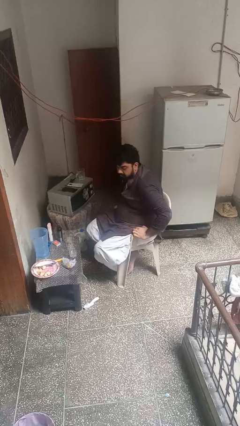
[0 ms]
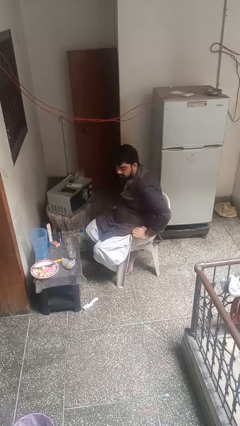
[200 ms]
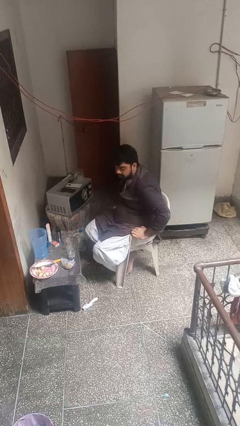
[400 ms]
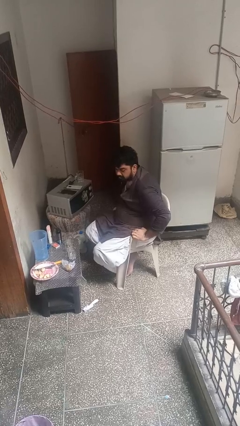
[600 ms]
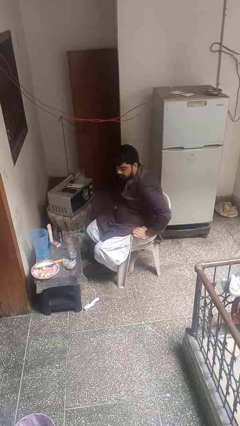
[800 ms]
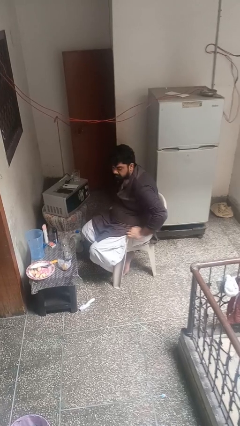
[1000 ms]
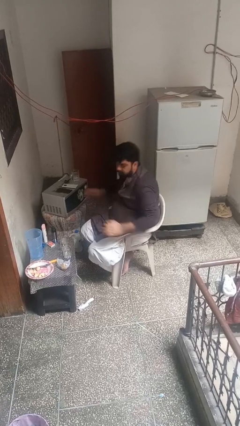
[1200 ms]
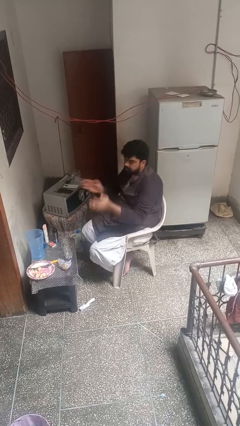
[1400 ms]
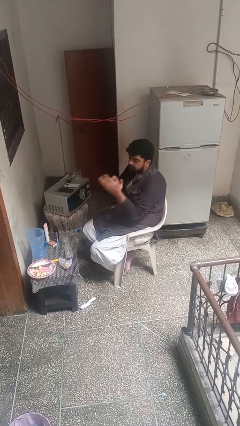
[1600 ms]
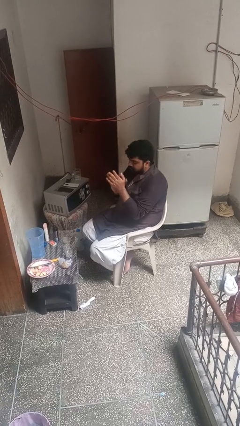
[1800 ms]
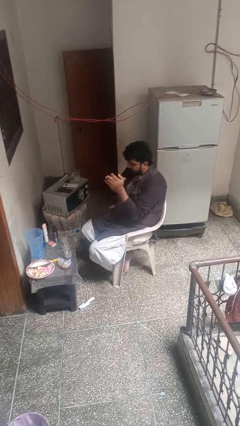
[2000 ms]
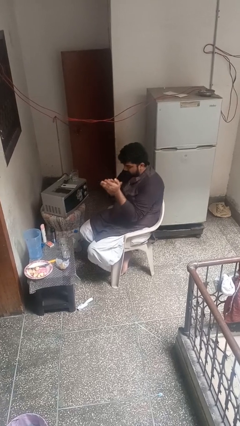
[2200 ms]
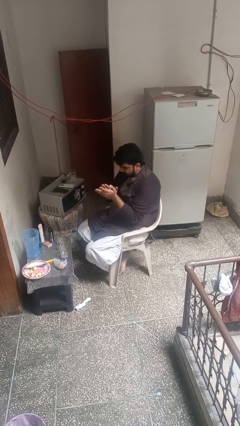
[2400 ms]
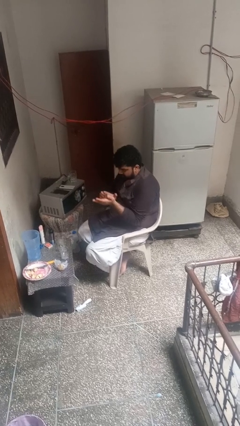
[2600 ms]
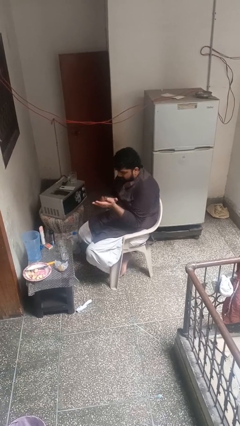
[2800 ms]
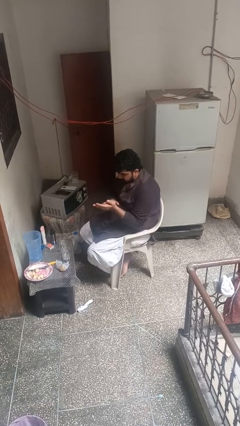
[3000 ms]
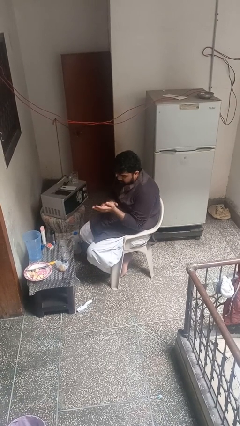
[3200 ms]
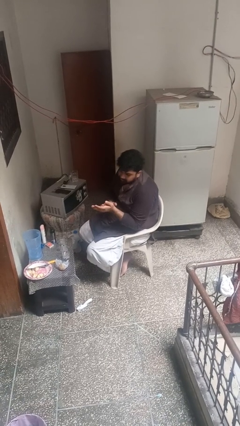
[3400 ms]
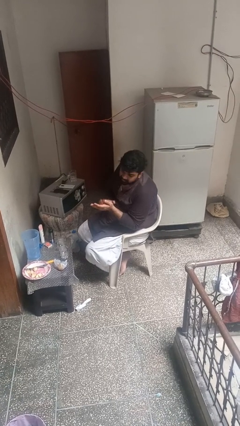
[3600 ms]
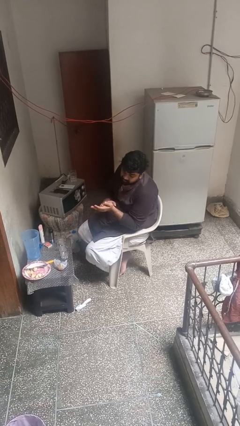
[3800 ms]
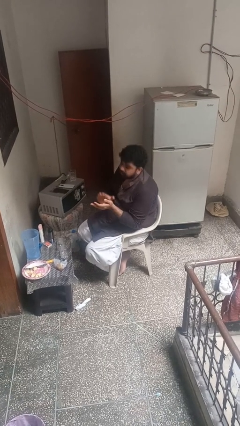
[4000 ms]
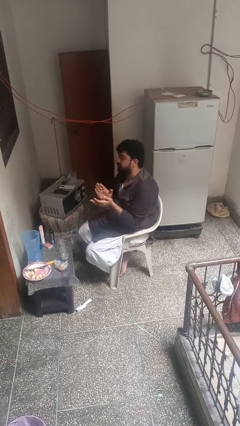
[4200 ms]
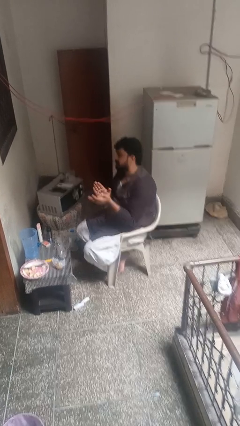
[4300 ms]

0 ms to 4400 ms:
person claps hands

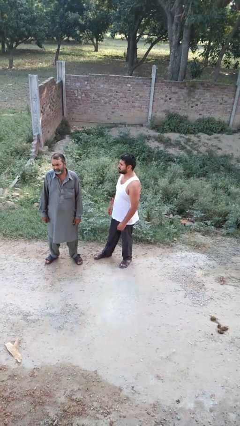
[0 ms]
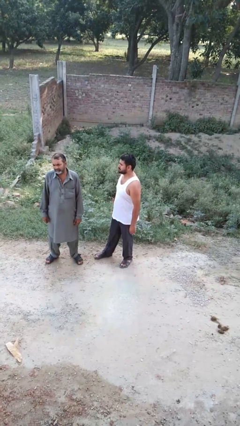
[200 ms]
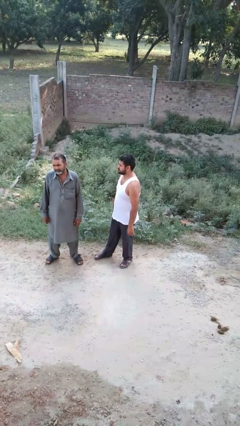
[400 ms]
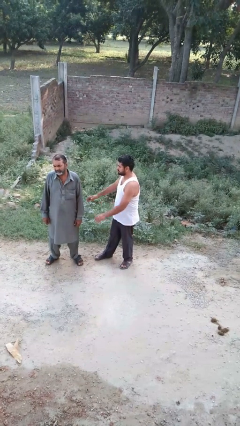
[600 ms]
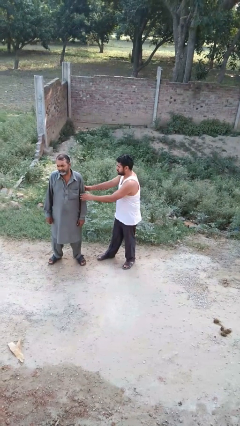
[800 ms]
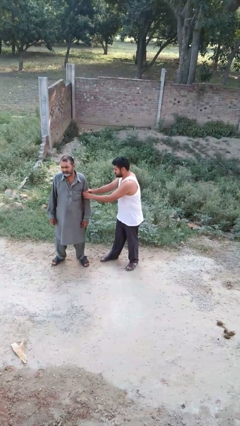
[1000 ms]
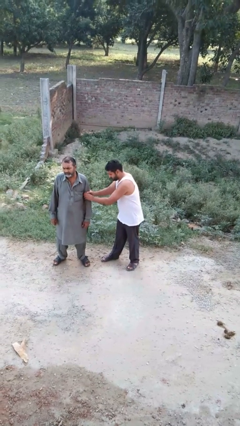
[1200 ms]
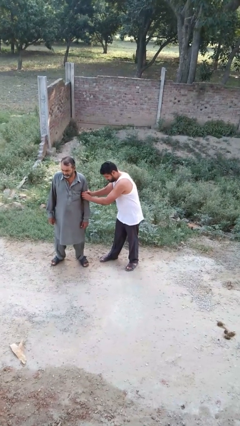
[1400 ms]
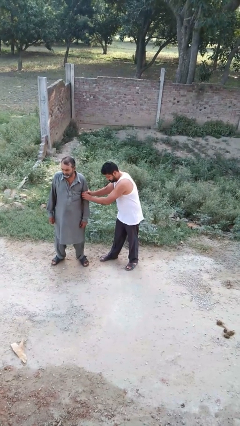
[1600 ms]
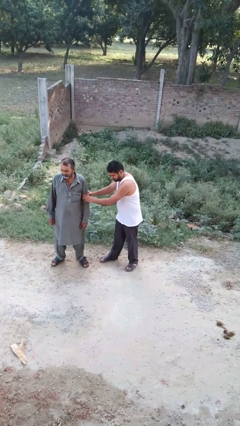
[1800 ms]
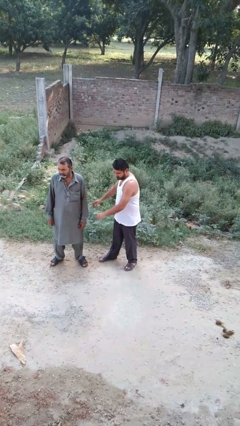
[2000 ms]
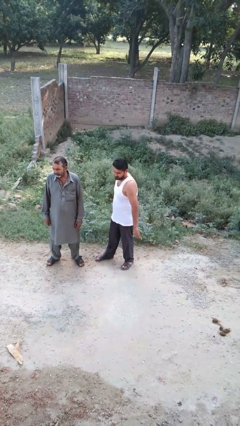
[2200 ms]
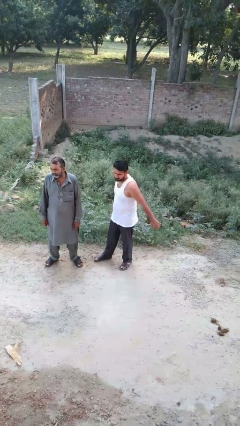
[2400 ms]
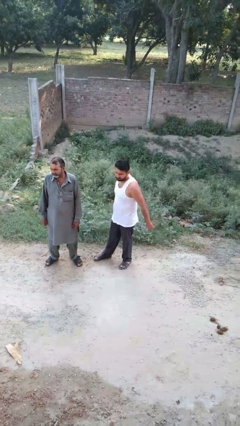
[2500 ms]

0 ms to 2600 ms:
person grabs person by forearm

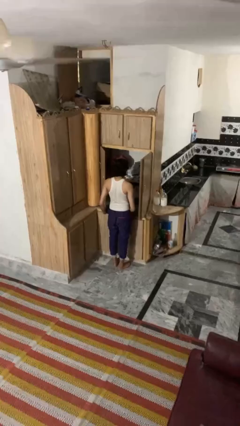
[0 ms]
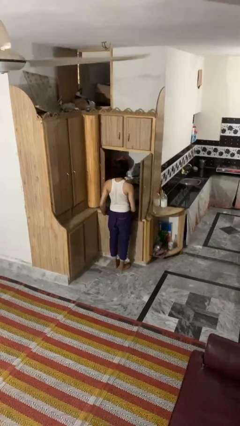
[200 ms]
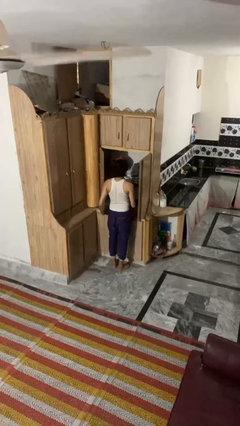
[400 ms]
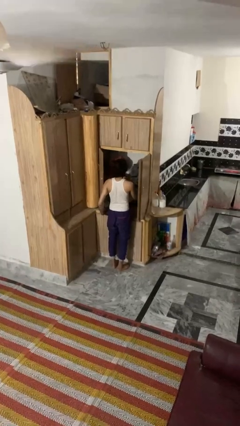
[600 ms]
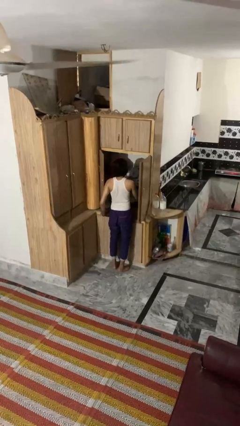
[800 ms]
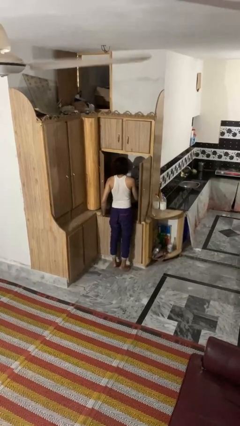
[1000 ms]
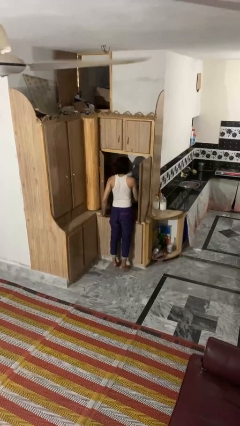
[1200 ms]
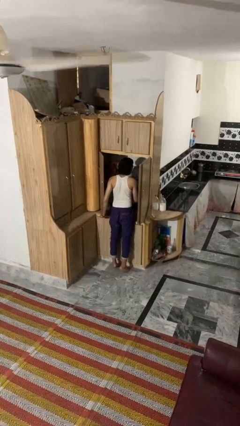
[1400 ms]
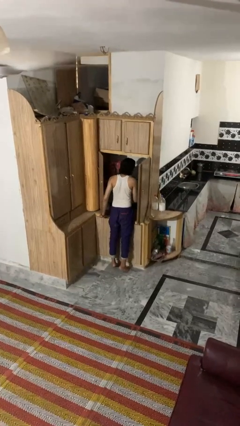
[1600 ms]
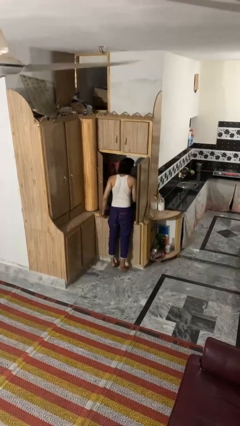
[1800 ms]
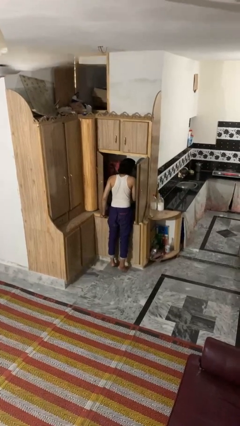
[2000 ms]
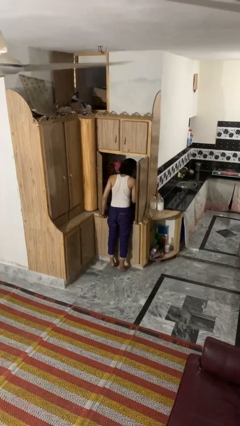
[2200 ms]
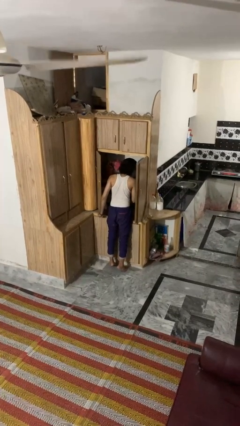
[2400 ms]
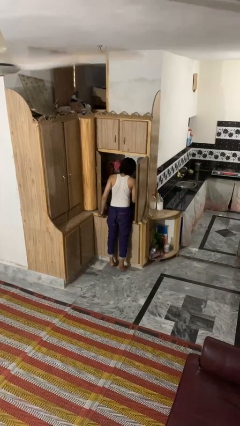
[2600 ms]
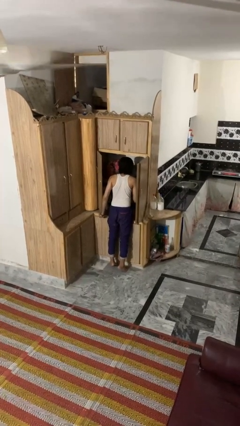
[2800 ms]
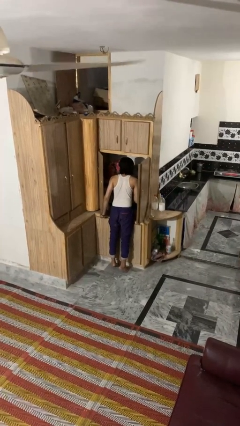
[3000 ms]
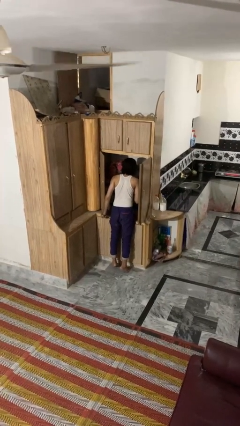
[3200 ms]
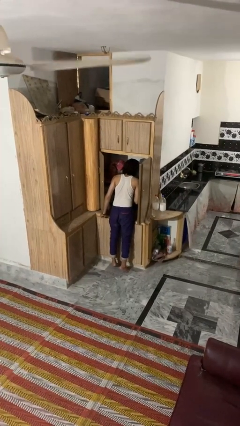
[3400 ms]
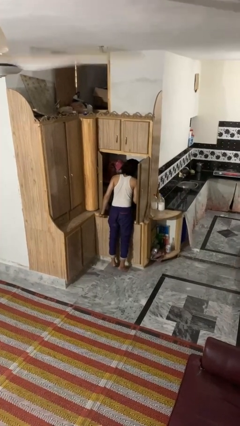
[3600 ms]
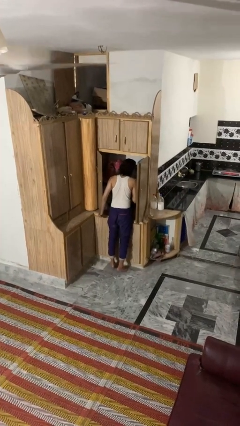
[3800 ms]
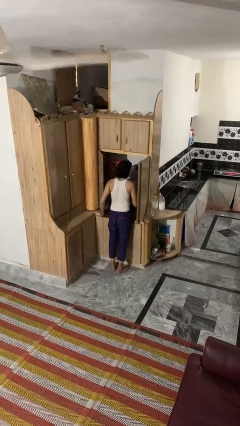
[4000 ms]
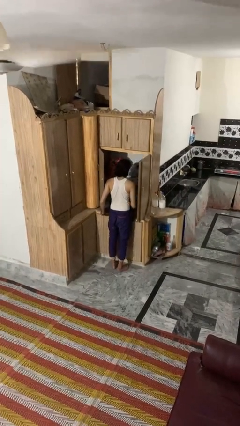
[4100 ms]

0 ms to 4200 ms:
person searches in cabinet

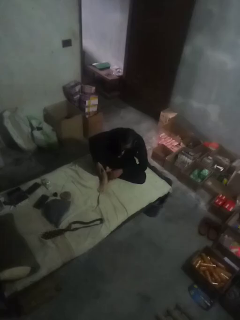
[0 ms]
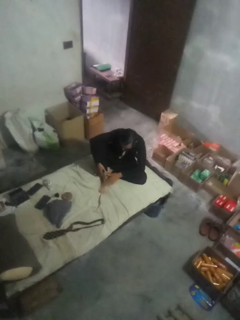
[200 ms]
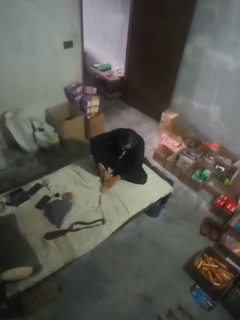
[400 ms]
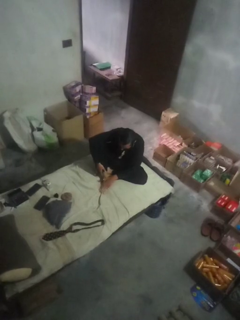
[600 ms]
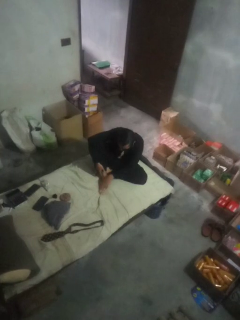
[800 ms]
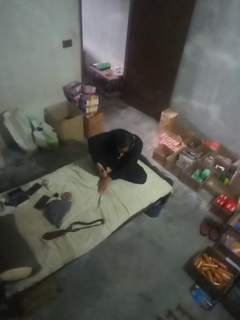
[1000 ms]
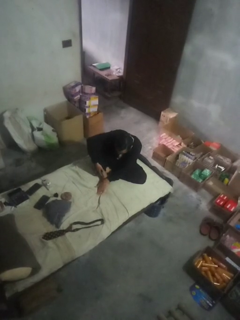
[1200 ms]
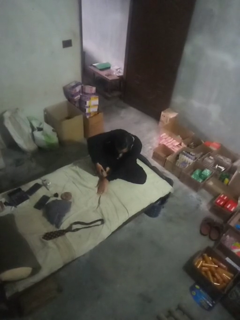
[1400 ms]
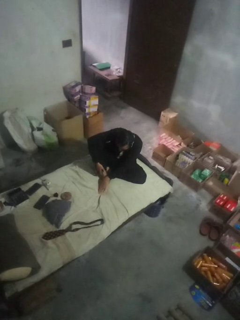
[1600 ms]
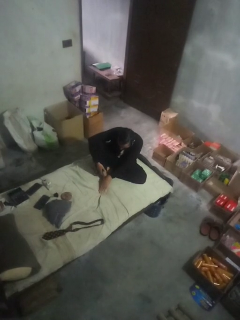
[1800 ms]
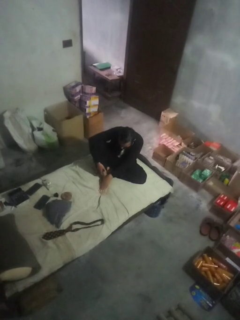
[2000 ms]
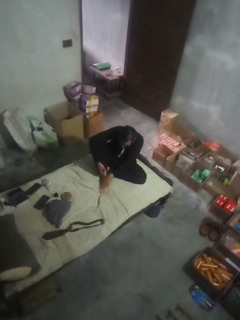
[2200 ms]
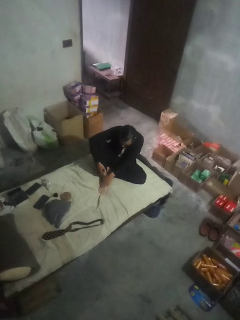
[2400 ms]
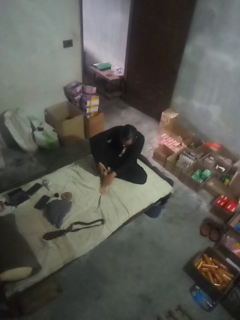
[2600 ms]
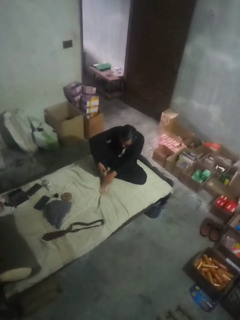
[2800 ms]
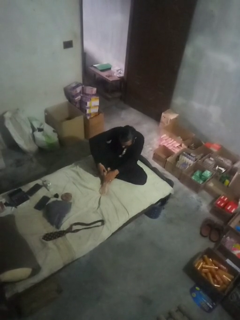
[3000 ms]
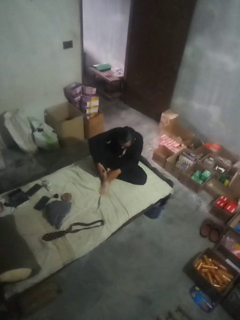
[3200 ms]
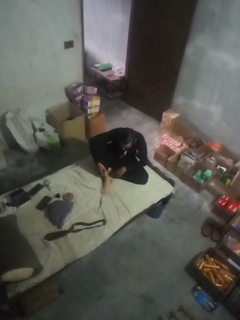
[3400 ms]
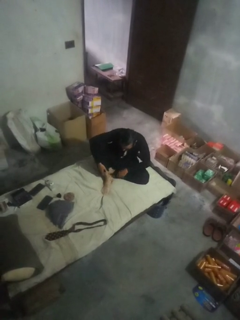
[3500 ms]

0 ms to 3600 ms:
person rubs foot

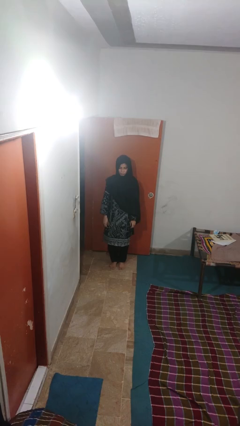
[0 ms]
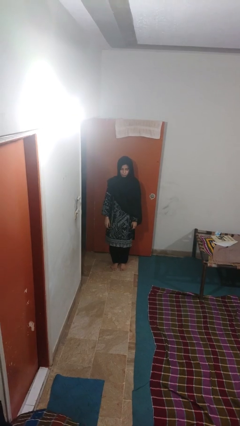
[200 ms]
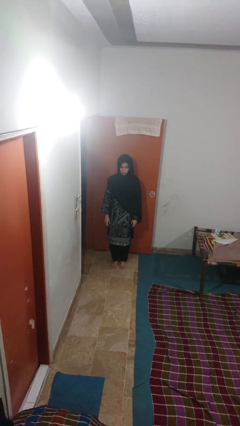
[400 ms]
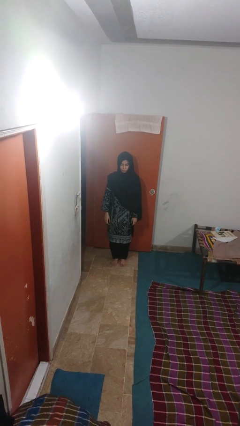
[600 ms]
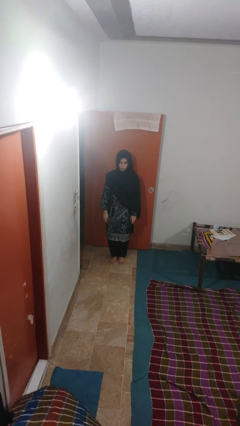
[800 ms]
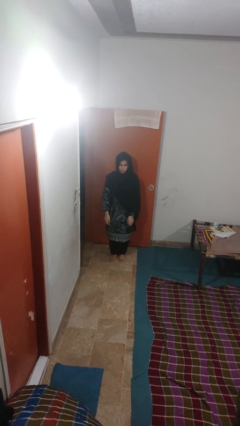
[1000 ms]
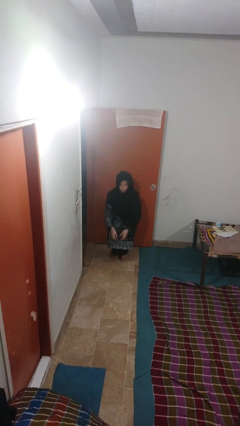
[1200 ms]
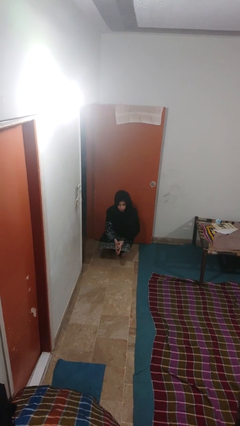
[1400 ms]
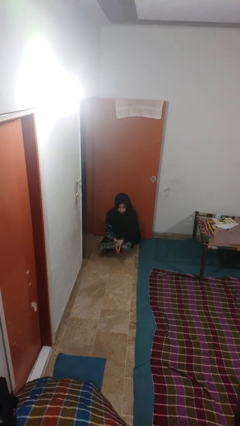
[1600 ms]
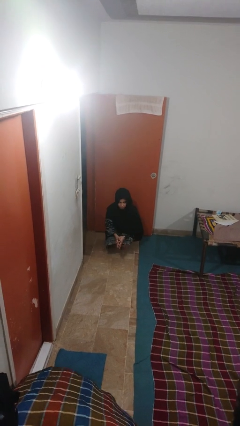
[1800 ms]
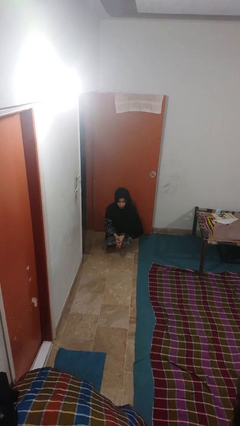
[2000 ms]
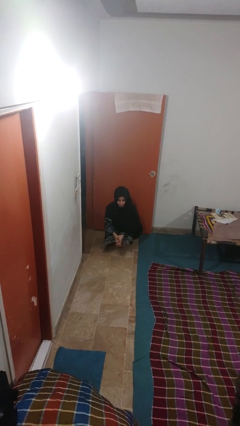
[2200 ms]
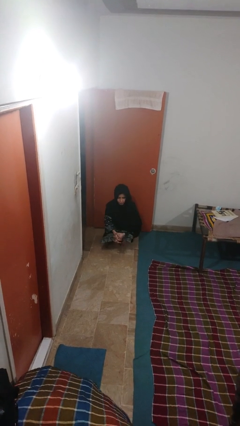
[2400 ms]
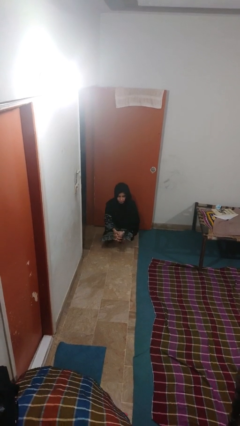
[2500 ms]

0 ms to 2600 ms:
person squats

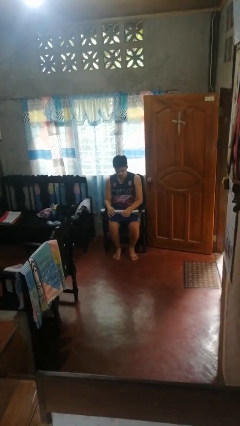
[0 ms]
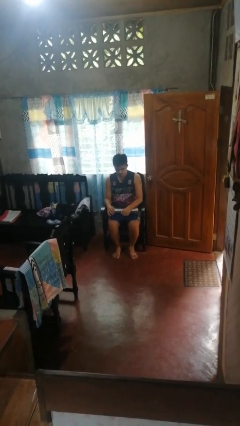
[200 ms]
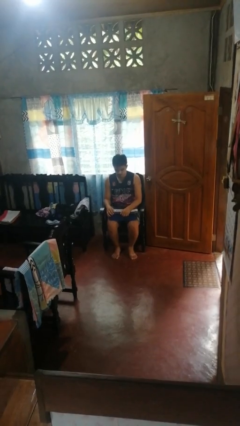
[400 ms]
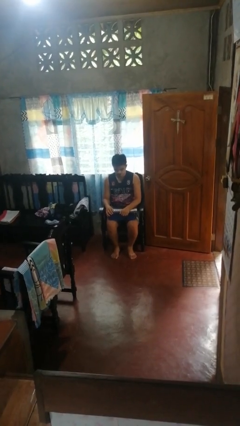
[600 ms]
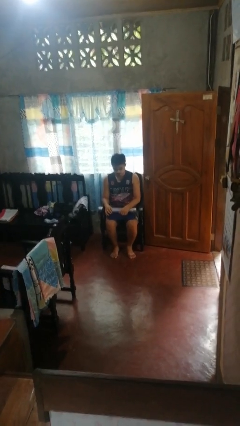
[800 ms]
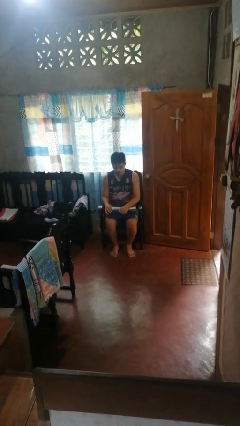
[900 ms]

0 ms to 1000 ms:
person puts object into box
